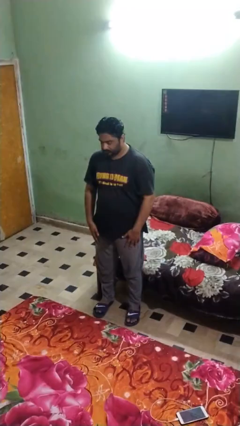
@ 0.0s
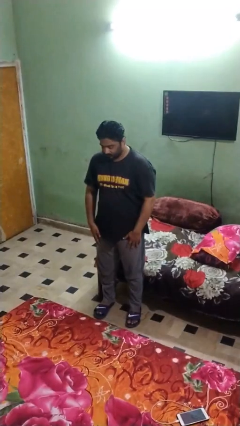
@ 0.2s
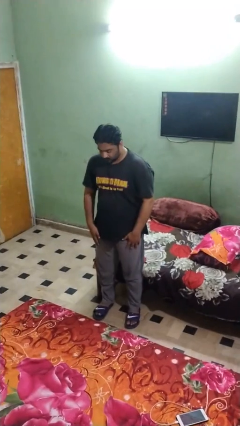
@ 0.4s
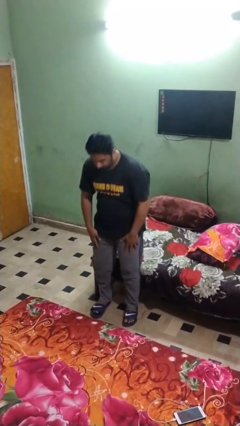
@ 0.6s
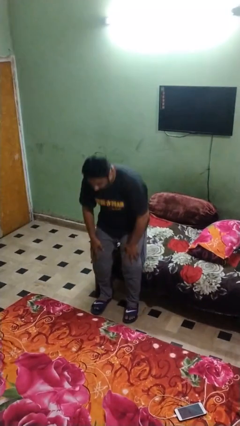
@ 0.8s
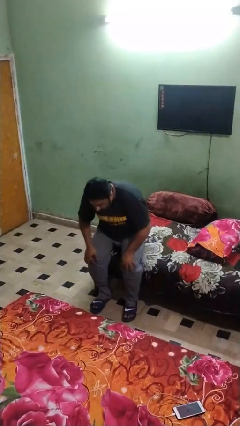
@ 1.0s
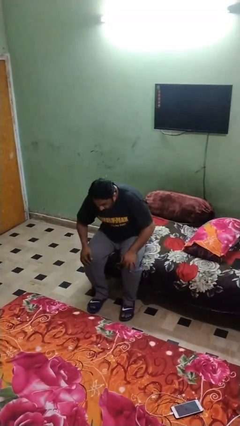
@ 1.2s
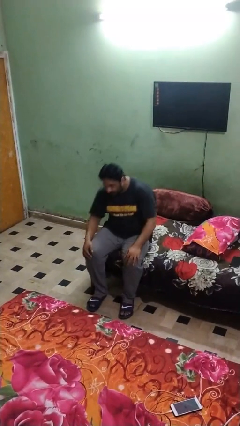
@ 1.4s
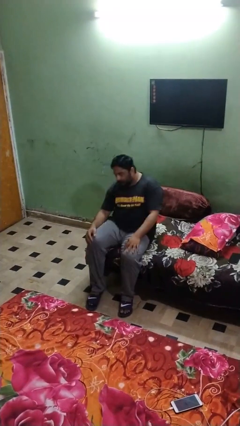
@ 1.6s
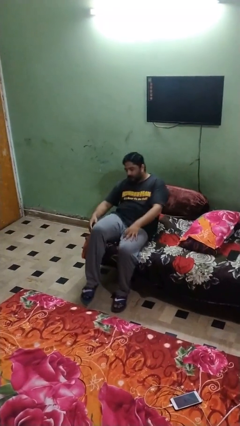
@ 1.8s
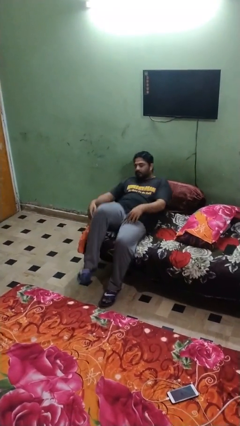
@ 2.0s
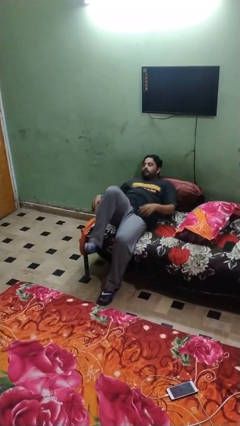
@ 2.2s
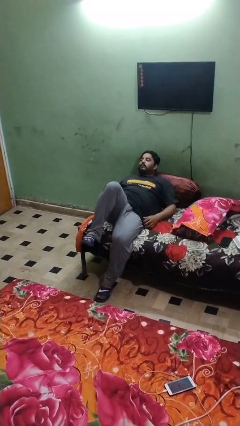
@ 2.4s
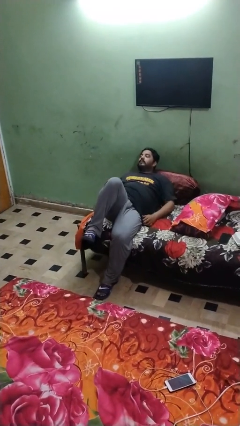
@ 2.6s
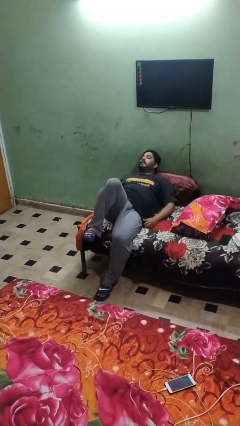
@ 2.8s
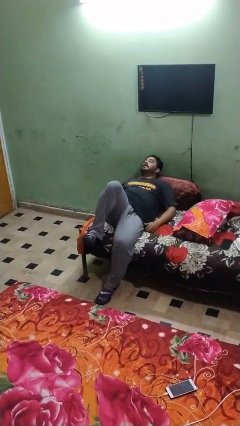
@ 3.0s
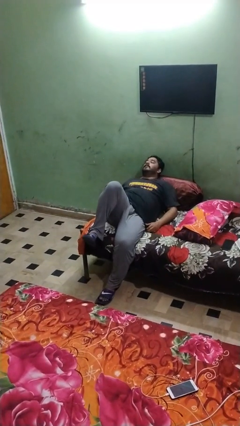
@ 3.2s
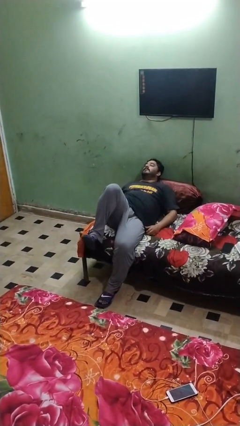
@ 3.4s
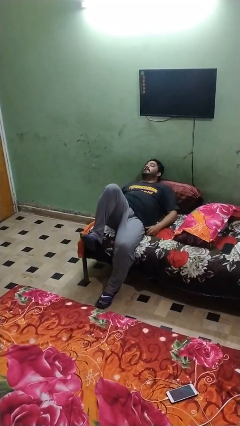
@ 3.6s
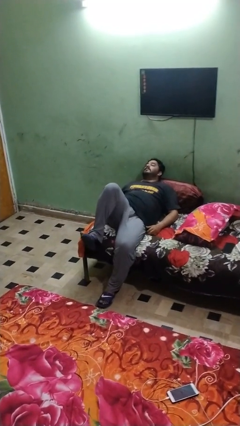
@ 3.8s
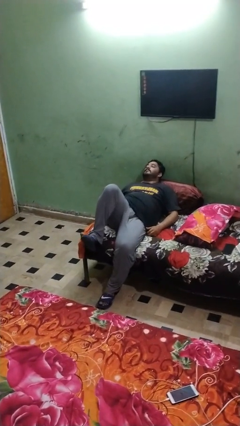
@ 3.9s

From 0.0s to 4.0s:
person lies down on couch

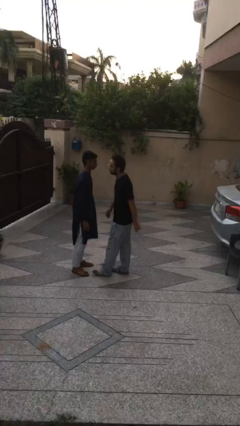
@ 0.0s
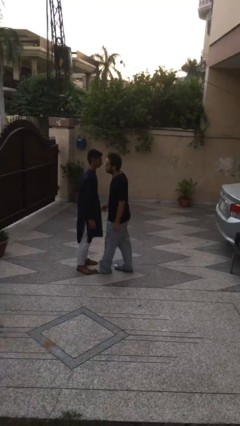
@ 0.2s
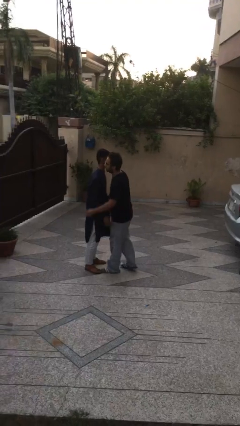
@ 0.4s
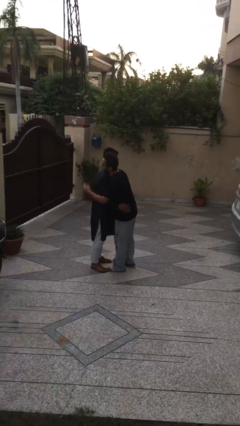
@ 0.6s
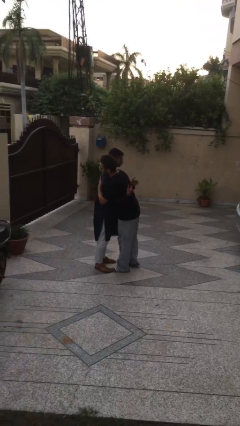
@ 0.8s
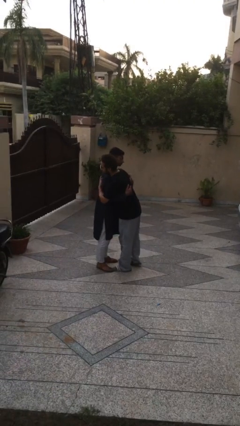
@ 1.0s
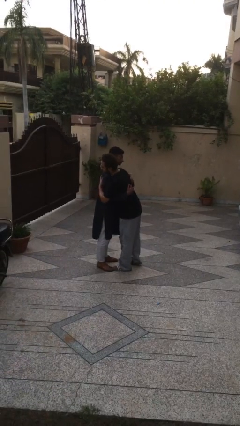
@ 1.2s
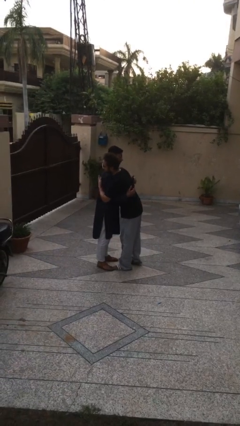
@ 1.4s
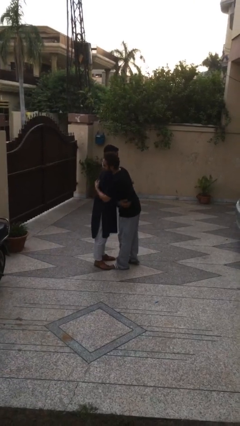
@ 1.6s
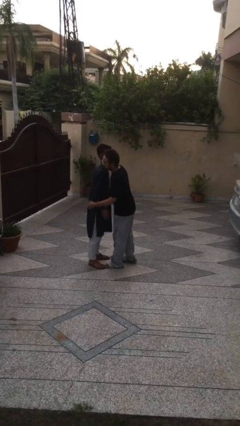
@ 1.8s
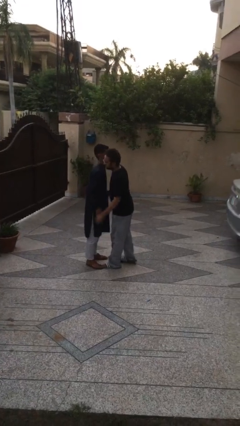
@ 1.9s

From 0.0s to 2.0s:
person embraces person

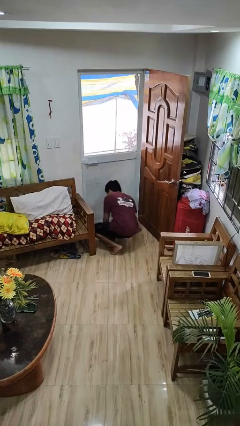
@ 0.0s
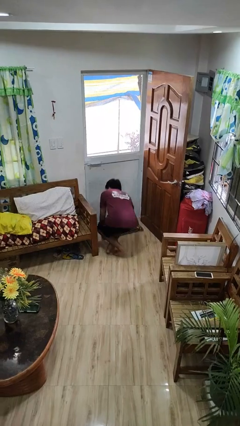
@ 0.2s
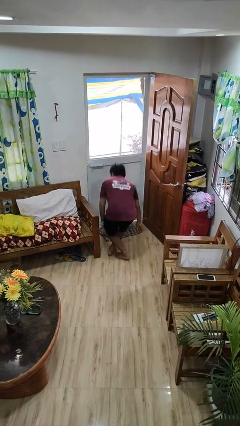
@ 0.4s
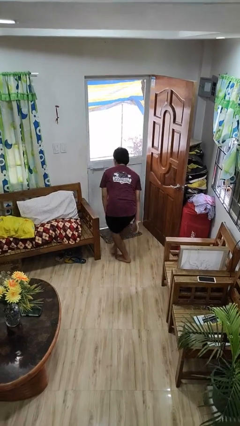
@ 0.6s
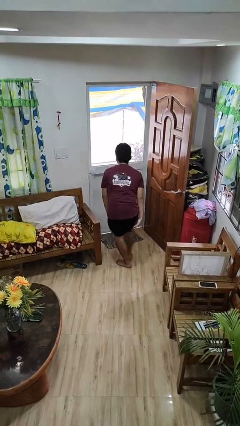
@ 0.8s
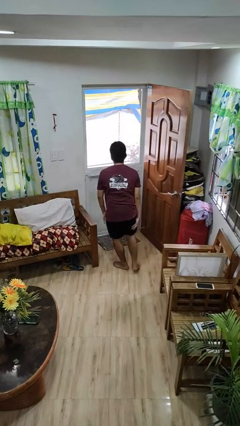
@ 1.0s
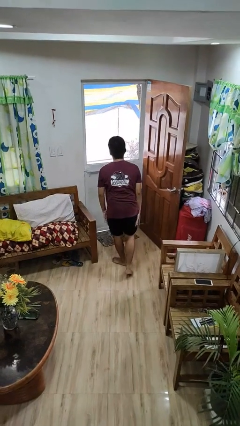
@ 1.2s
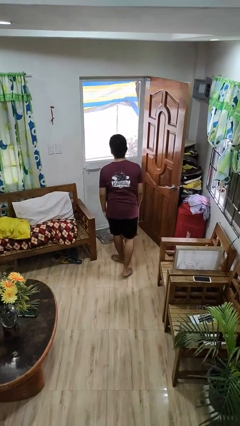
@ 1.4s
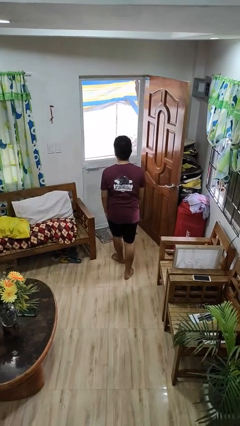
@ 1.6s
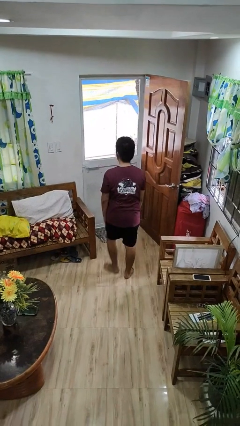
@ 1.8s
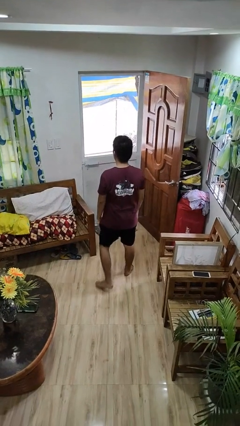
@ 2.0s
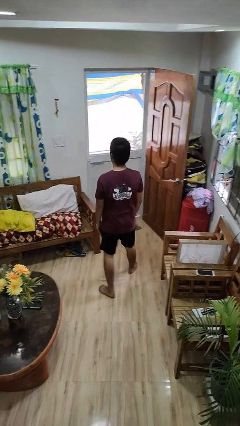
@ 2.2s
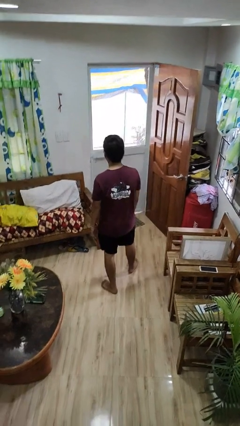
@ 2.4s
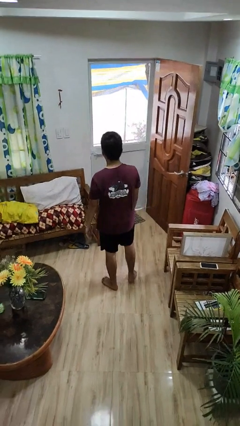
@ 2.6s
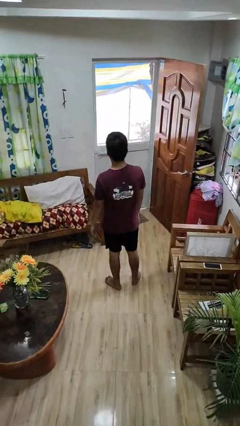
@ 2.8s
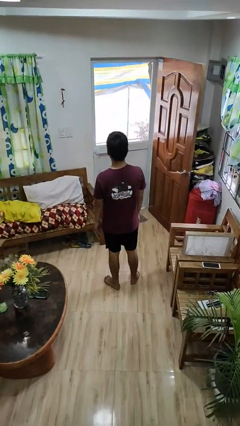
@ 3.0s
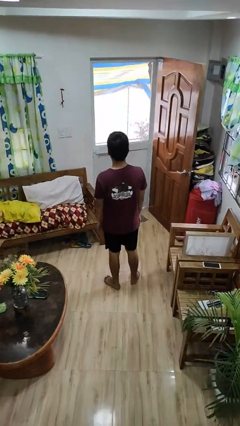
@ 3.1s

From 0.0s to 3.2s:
person stands up from floor

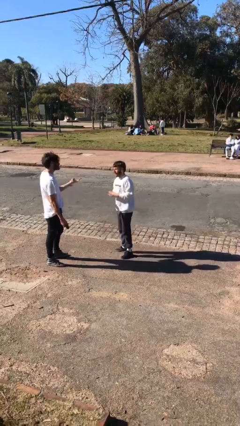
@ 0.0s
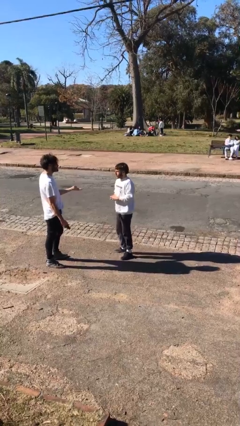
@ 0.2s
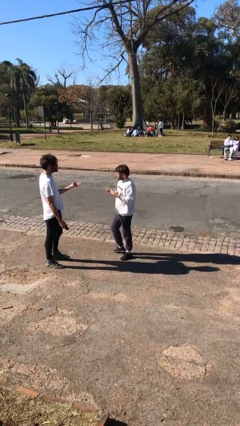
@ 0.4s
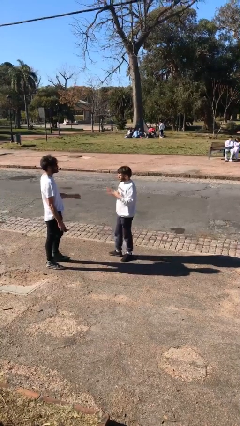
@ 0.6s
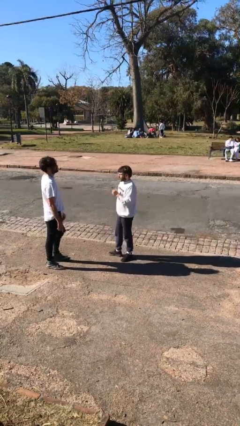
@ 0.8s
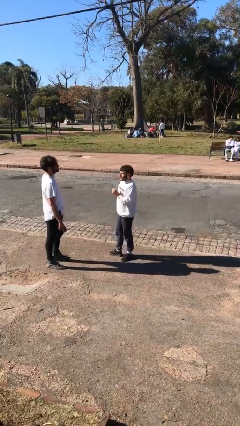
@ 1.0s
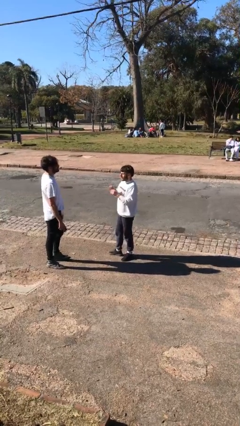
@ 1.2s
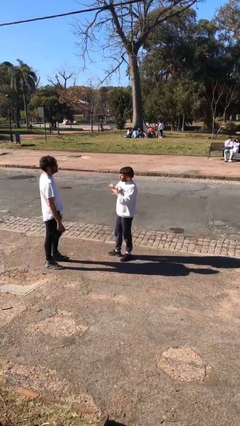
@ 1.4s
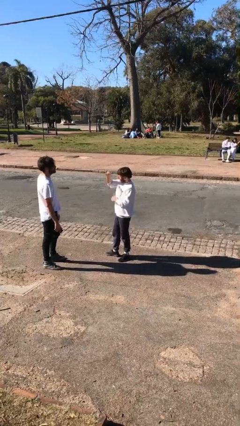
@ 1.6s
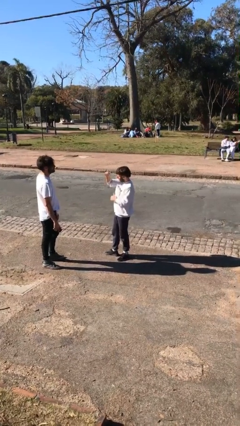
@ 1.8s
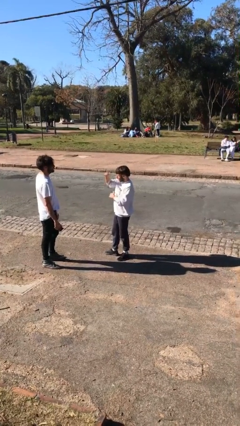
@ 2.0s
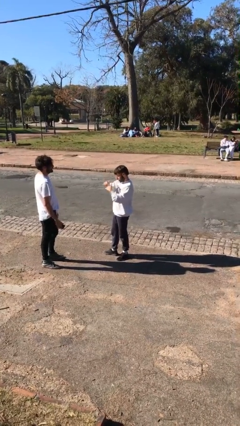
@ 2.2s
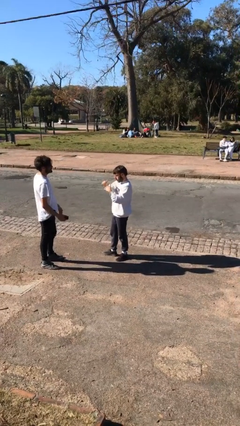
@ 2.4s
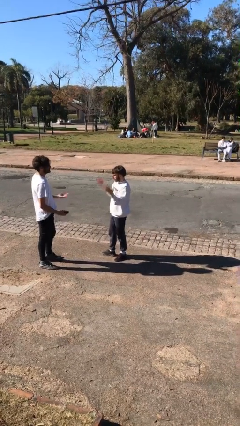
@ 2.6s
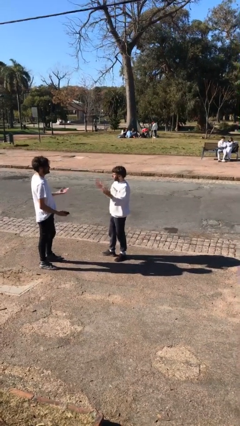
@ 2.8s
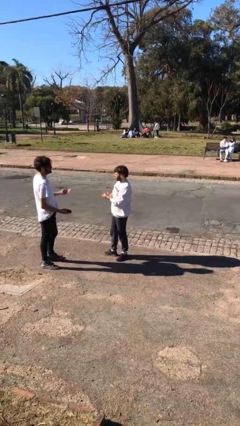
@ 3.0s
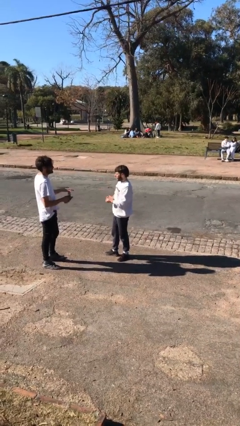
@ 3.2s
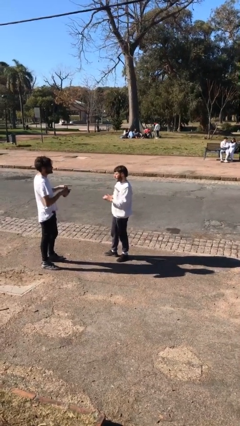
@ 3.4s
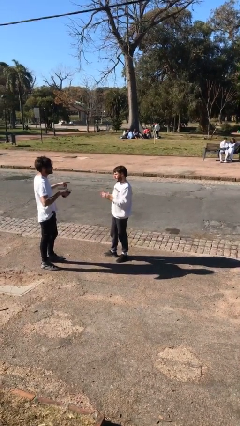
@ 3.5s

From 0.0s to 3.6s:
person talks to person

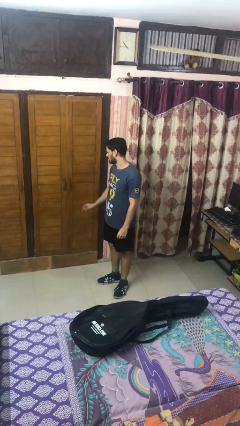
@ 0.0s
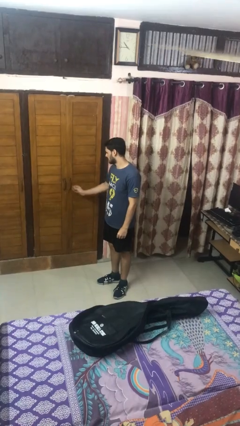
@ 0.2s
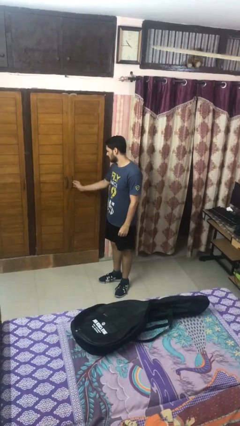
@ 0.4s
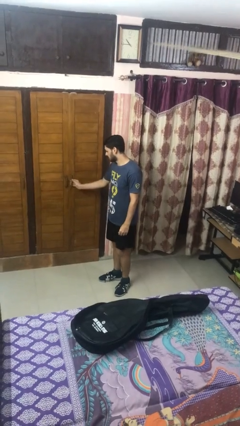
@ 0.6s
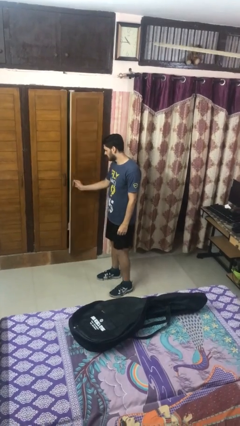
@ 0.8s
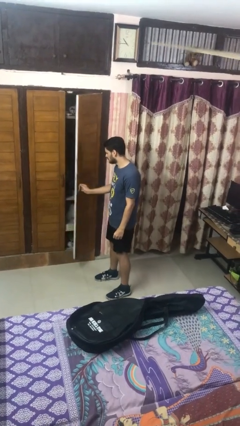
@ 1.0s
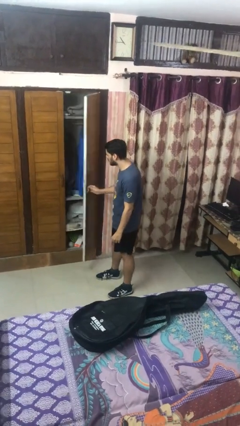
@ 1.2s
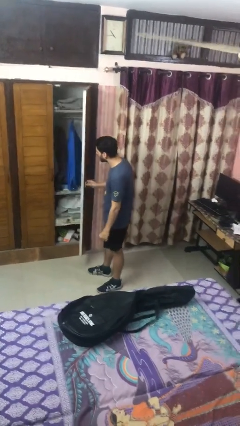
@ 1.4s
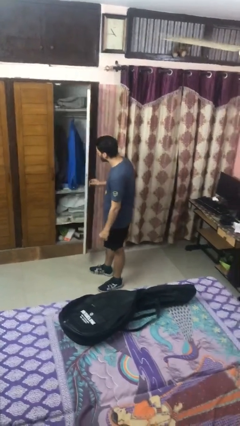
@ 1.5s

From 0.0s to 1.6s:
person opens closet door

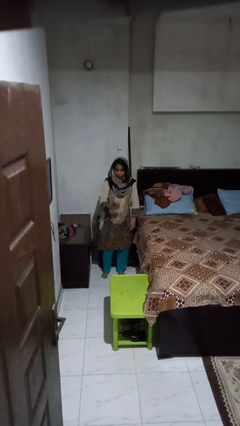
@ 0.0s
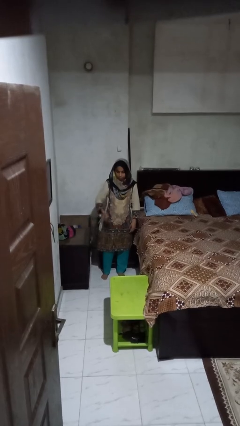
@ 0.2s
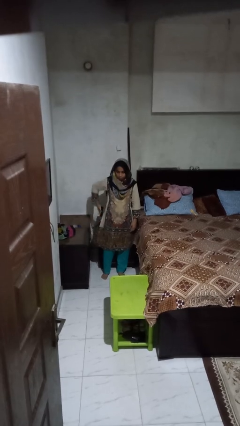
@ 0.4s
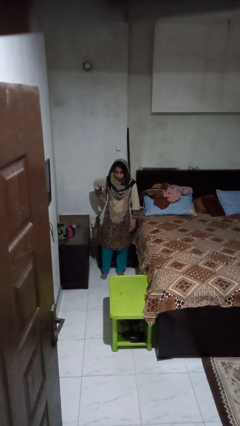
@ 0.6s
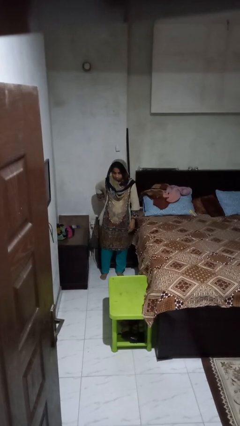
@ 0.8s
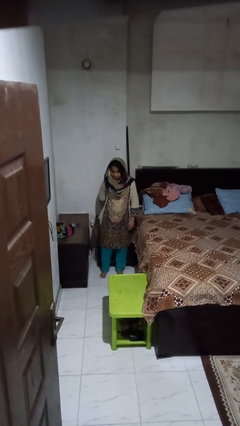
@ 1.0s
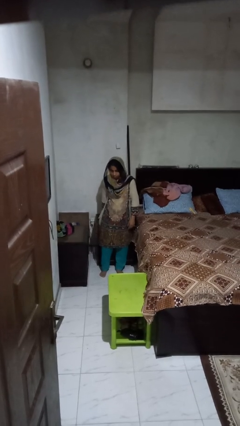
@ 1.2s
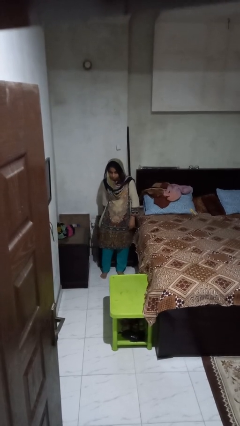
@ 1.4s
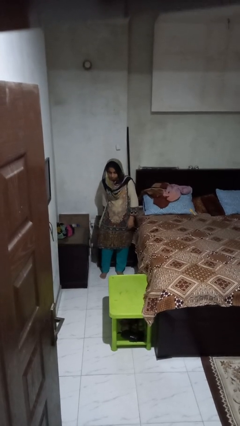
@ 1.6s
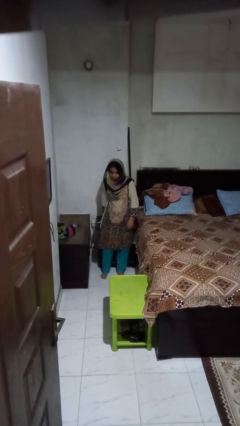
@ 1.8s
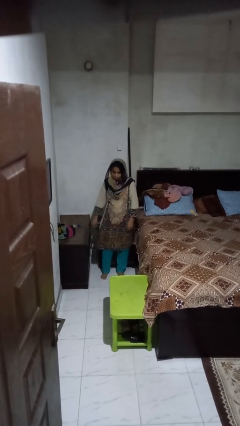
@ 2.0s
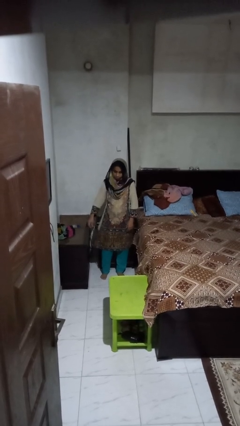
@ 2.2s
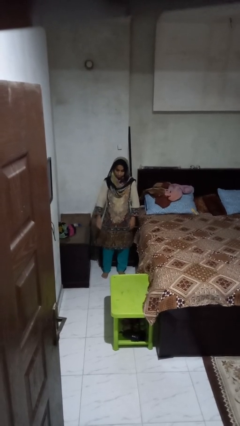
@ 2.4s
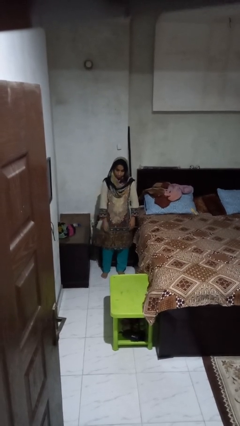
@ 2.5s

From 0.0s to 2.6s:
person puts phone into pocket

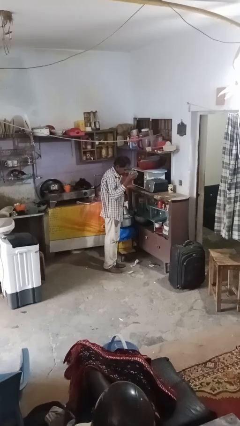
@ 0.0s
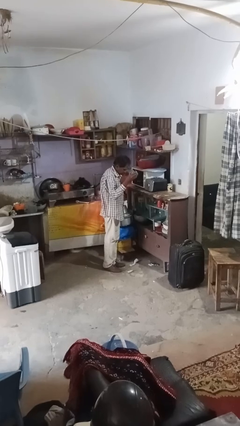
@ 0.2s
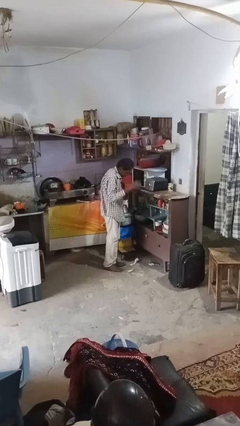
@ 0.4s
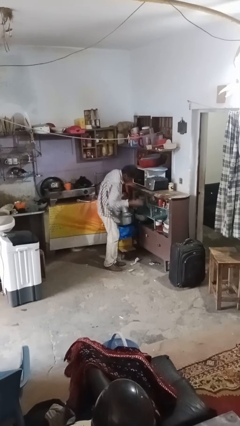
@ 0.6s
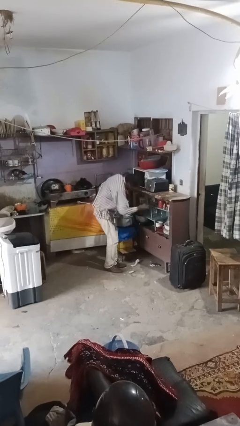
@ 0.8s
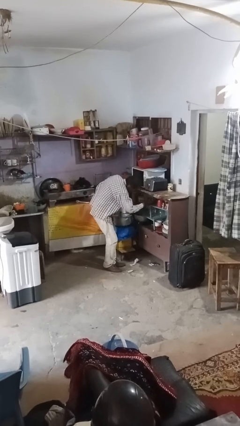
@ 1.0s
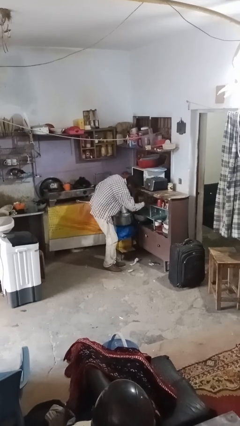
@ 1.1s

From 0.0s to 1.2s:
person puts object into kitchen drawer
